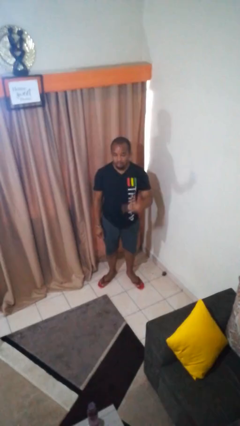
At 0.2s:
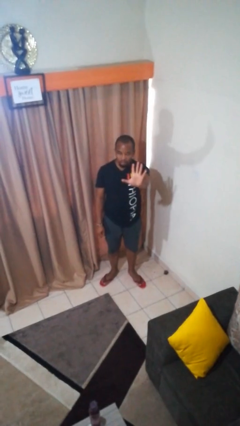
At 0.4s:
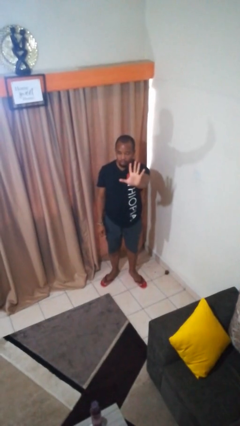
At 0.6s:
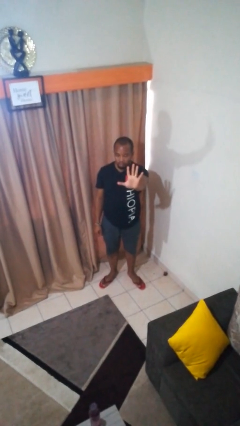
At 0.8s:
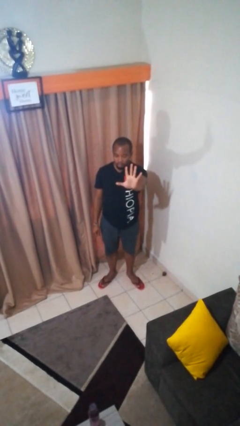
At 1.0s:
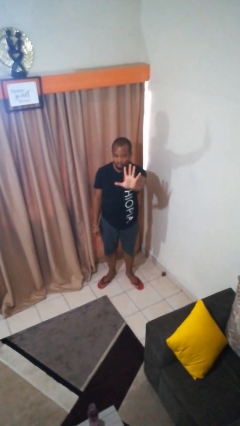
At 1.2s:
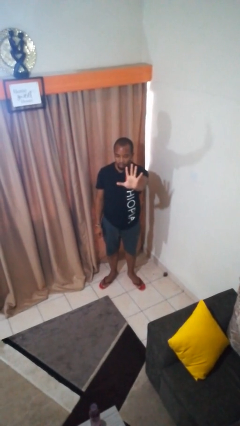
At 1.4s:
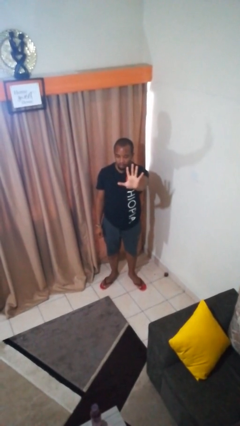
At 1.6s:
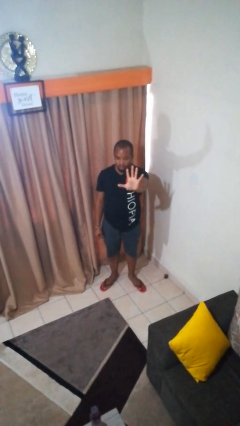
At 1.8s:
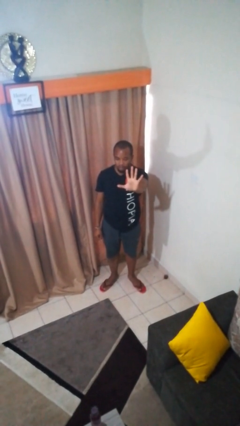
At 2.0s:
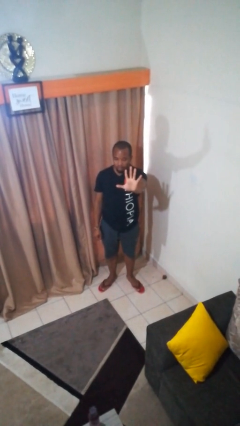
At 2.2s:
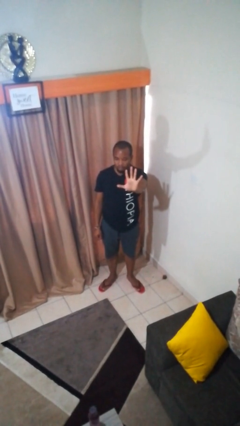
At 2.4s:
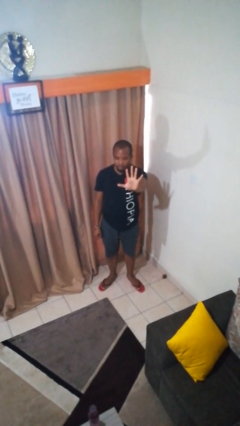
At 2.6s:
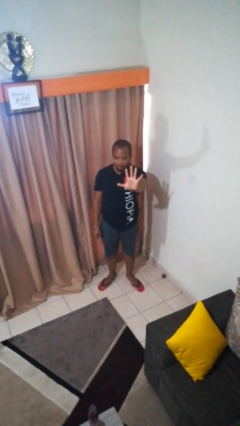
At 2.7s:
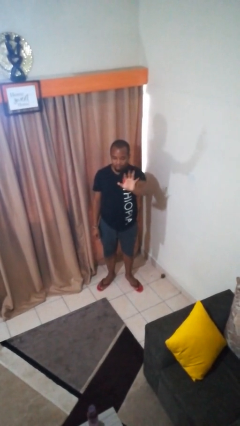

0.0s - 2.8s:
person gestures number five

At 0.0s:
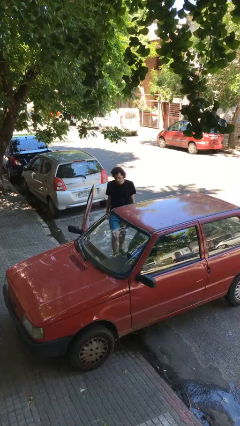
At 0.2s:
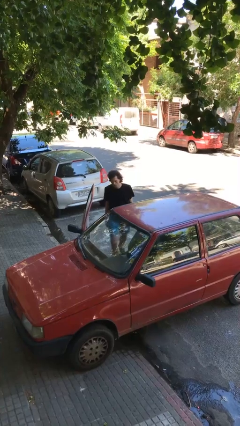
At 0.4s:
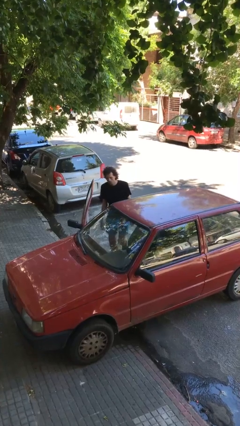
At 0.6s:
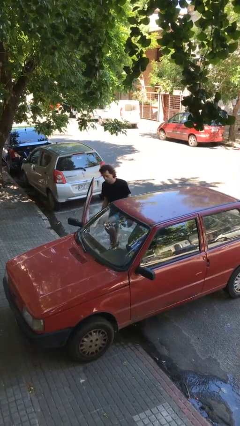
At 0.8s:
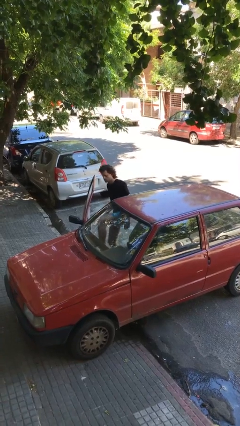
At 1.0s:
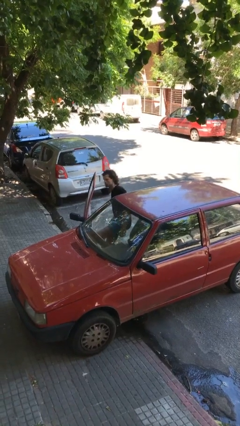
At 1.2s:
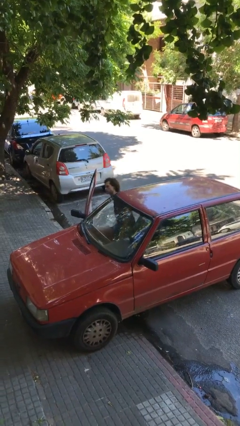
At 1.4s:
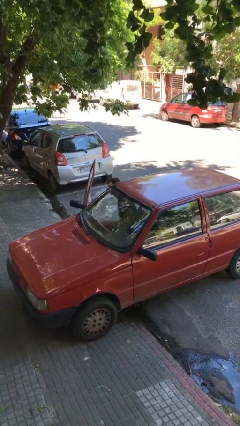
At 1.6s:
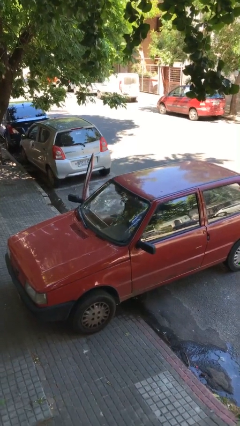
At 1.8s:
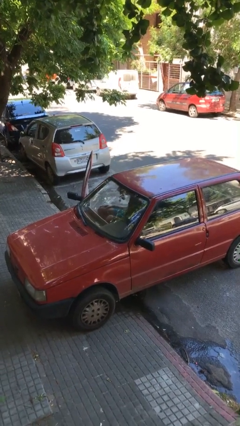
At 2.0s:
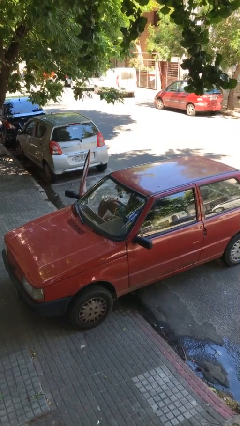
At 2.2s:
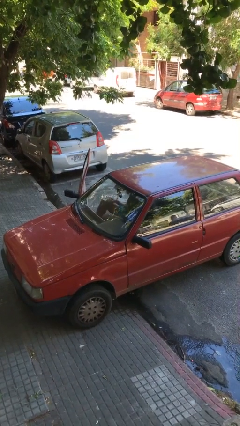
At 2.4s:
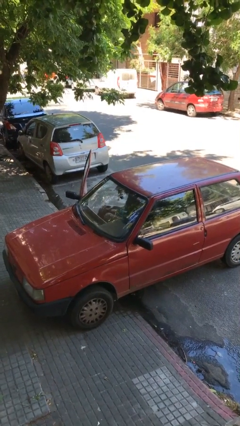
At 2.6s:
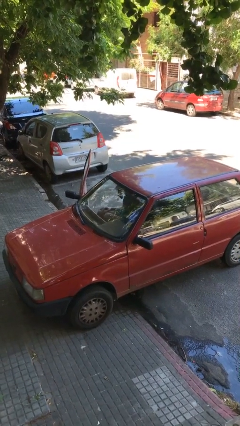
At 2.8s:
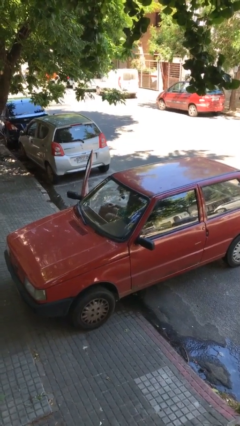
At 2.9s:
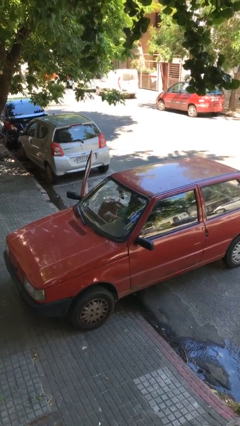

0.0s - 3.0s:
person enters car

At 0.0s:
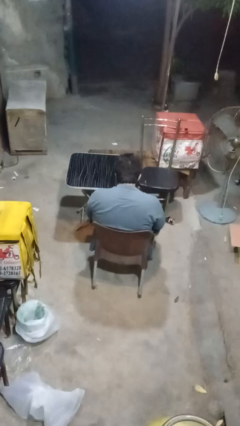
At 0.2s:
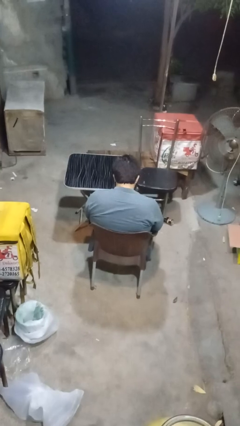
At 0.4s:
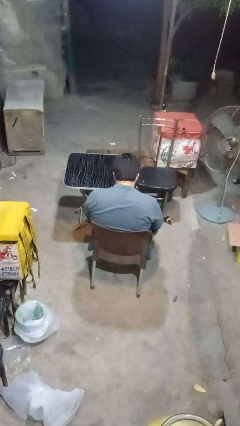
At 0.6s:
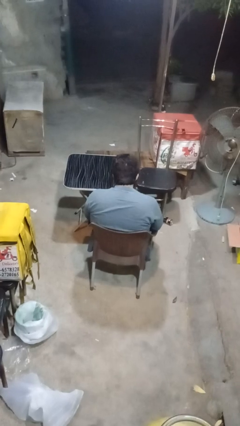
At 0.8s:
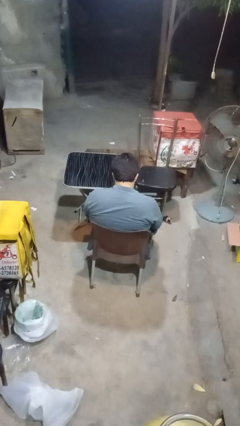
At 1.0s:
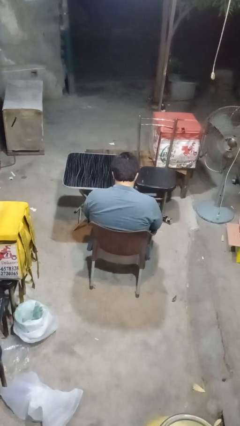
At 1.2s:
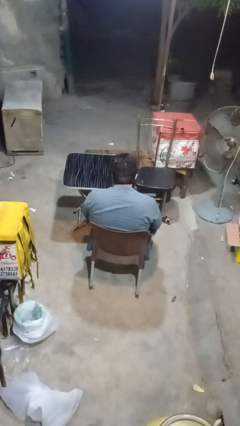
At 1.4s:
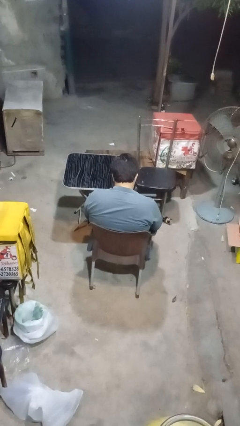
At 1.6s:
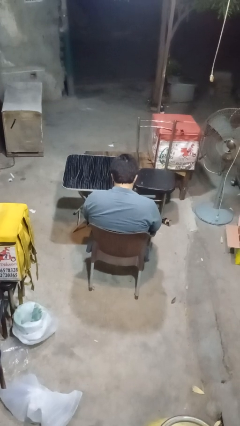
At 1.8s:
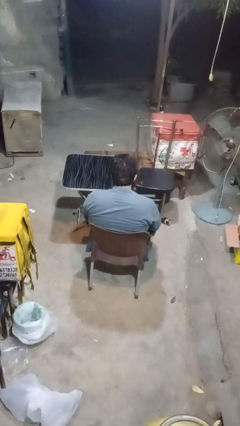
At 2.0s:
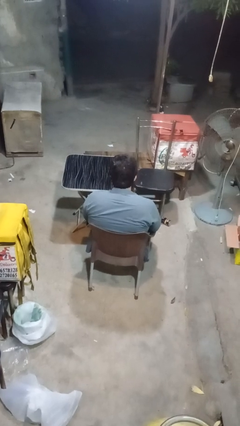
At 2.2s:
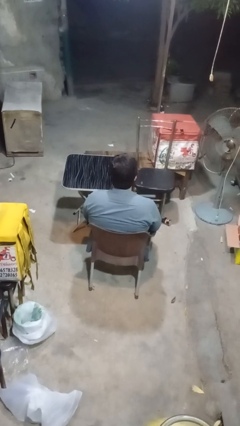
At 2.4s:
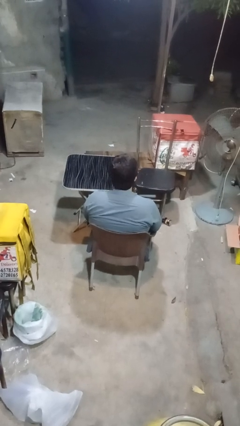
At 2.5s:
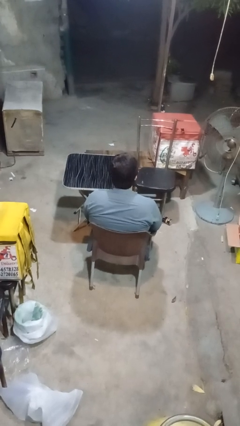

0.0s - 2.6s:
person nods head

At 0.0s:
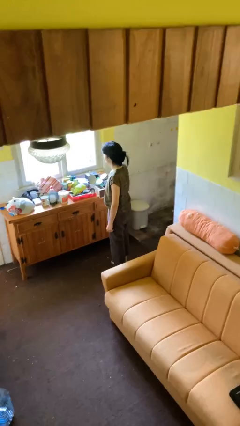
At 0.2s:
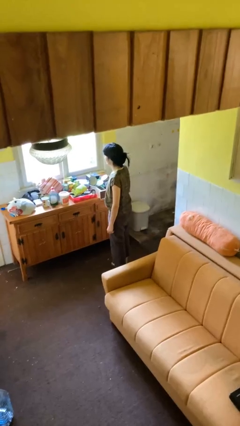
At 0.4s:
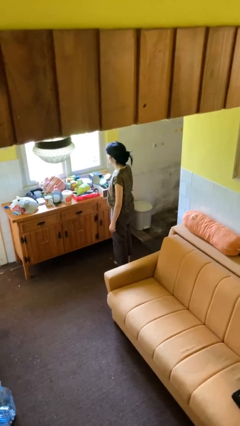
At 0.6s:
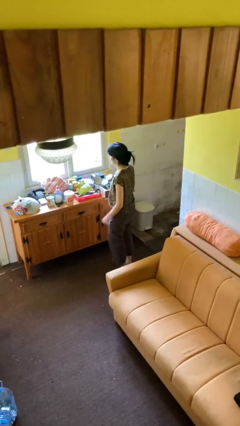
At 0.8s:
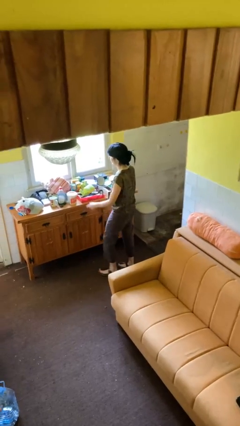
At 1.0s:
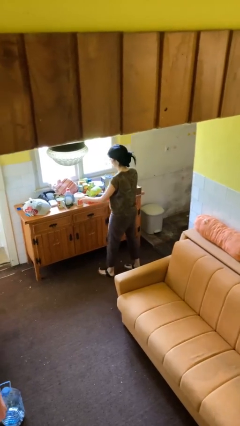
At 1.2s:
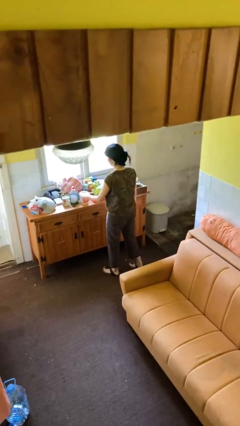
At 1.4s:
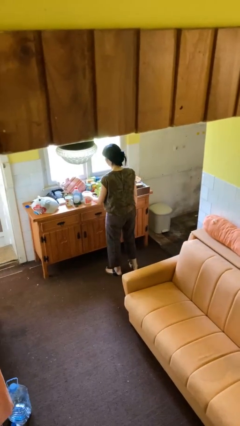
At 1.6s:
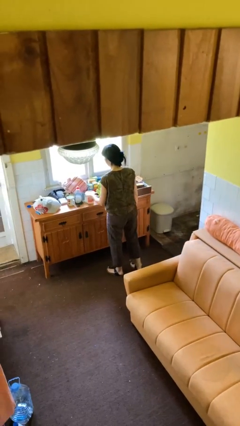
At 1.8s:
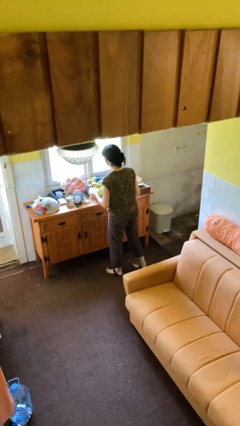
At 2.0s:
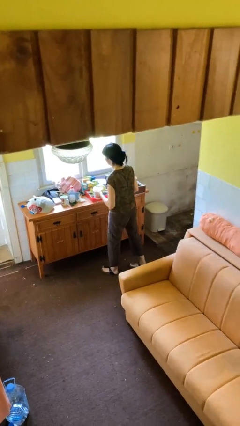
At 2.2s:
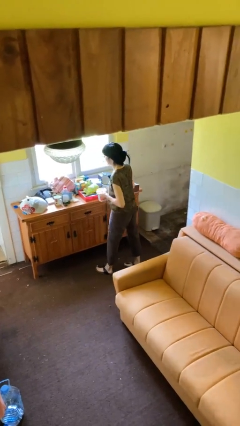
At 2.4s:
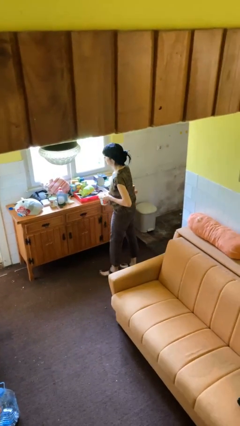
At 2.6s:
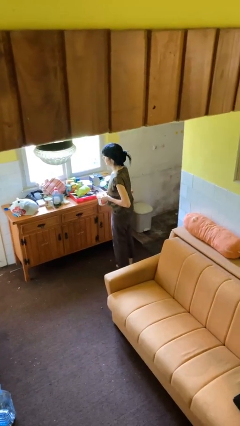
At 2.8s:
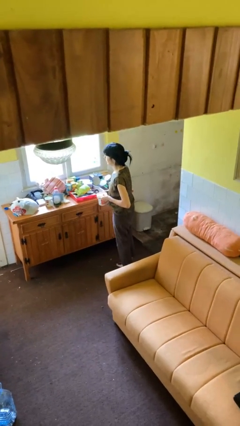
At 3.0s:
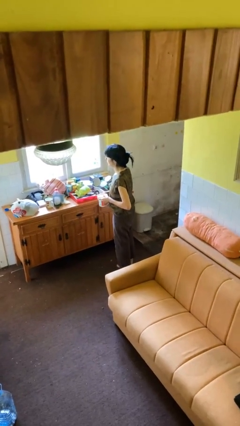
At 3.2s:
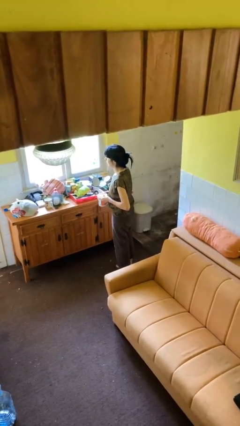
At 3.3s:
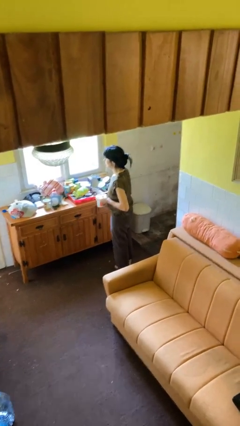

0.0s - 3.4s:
person picks up object from countertop

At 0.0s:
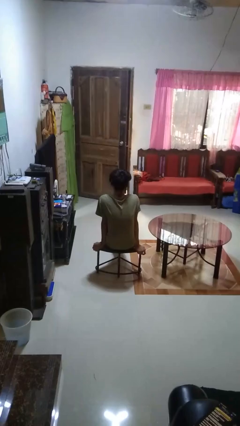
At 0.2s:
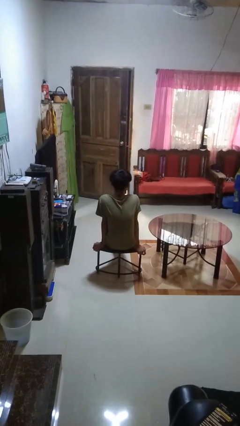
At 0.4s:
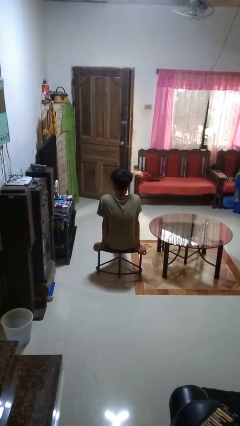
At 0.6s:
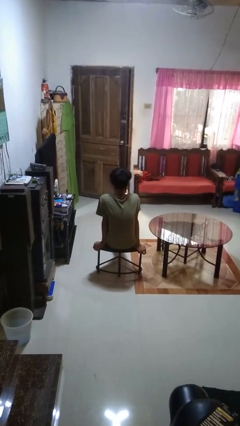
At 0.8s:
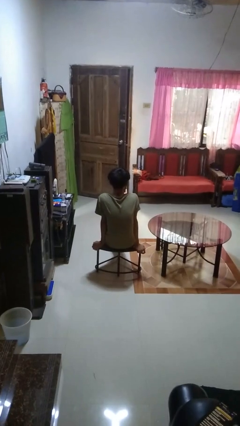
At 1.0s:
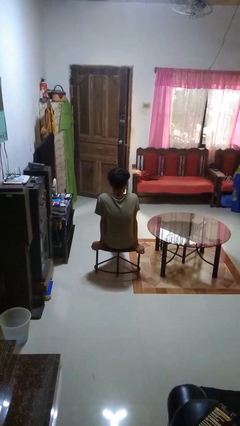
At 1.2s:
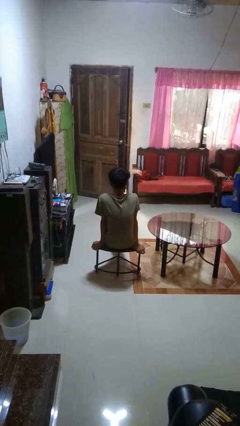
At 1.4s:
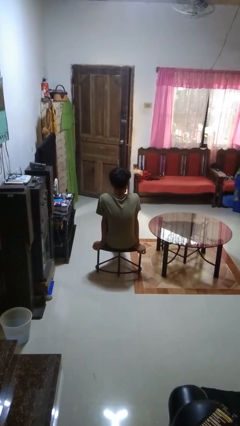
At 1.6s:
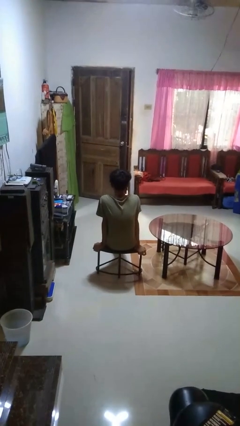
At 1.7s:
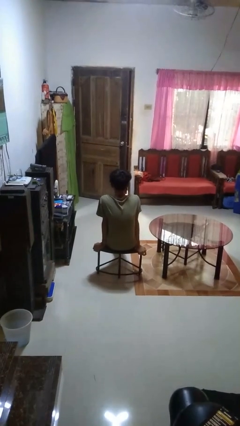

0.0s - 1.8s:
person shakes head

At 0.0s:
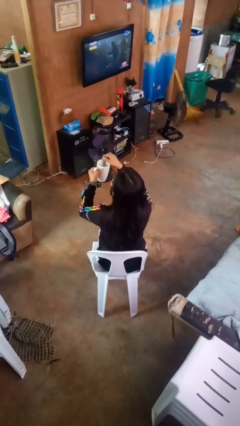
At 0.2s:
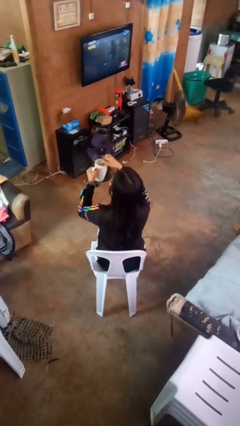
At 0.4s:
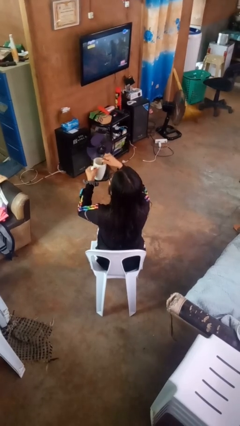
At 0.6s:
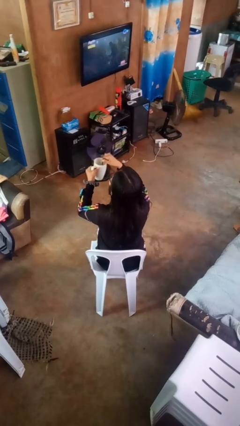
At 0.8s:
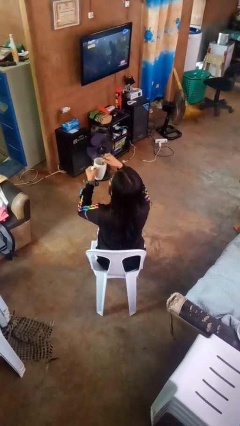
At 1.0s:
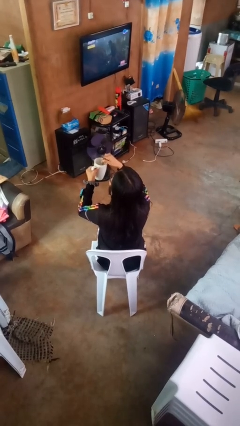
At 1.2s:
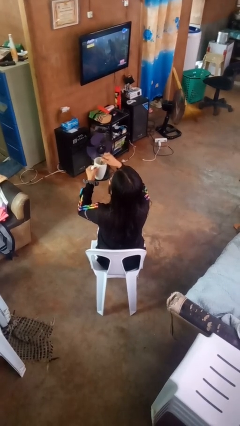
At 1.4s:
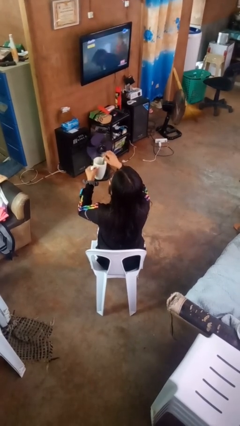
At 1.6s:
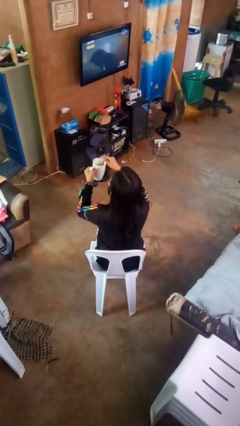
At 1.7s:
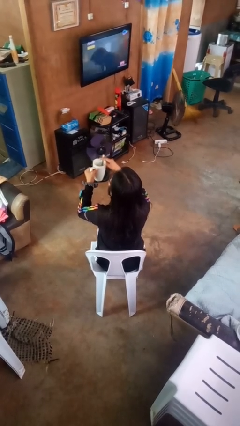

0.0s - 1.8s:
person stirs mug

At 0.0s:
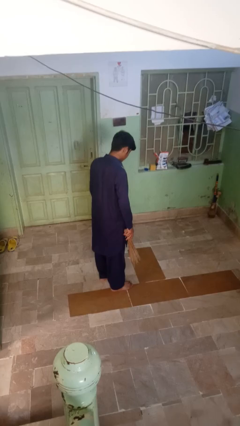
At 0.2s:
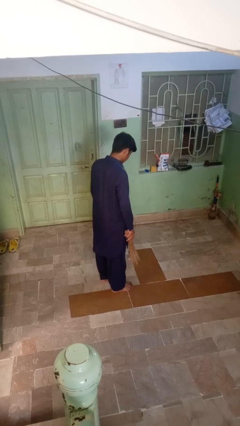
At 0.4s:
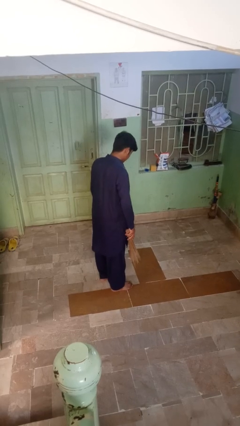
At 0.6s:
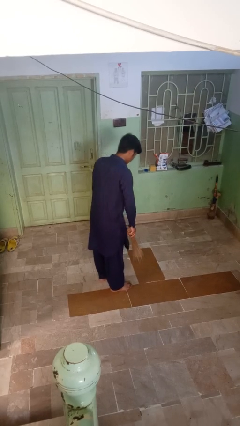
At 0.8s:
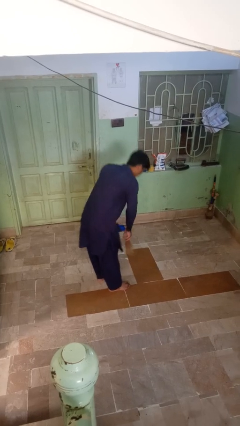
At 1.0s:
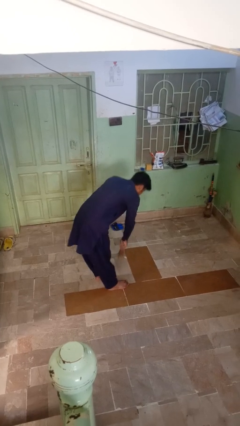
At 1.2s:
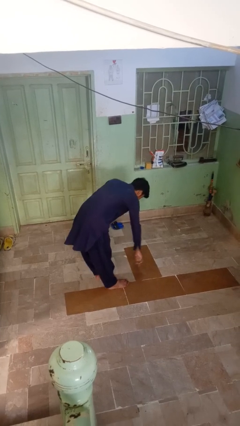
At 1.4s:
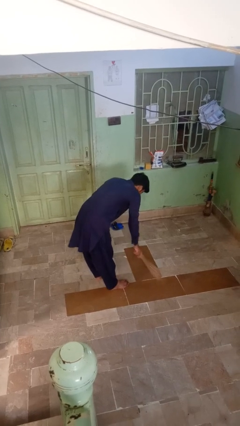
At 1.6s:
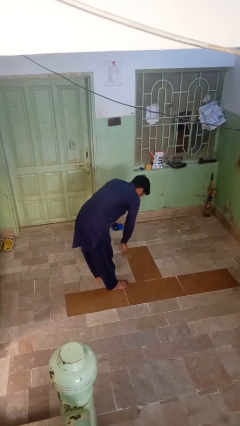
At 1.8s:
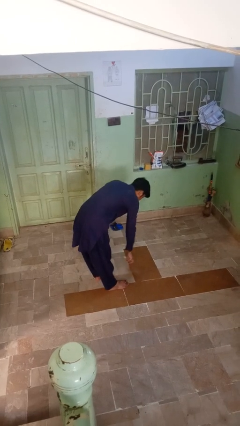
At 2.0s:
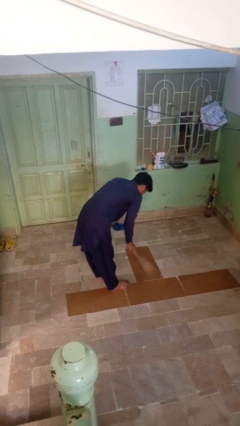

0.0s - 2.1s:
person sweeps floor

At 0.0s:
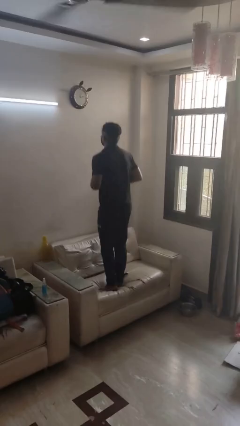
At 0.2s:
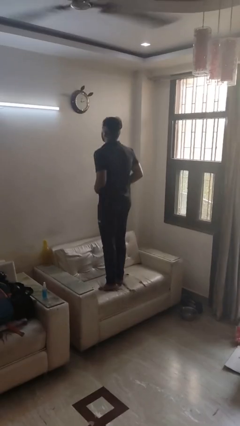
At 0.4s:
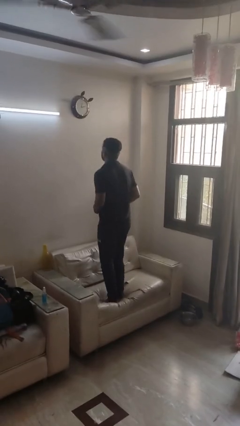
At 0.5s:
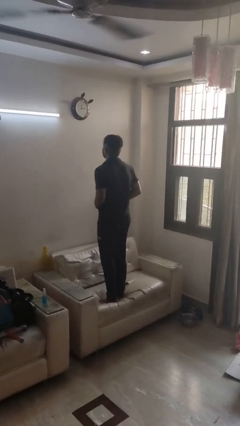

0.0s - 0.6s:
person jumps on couch
